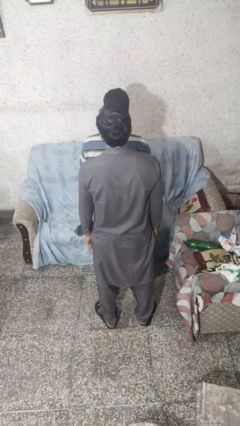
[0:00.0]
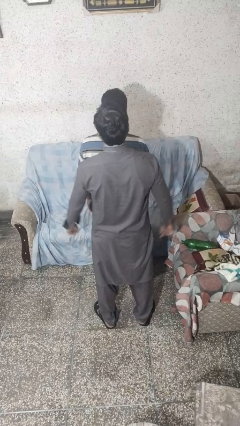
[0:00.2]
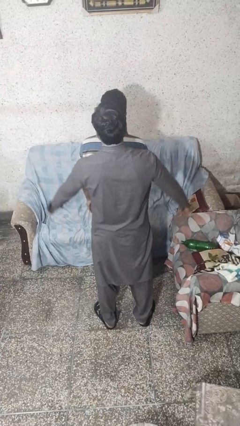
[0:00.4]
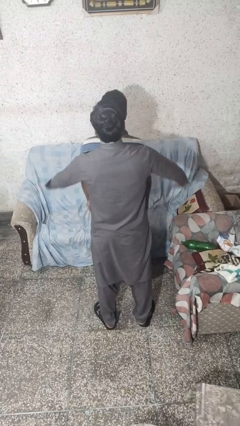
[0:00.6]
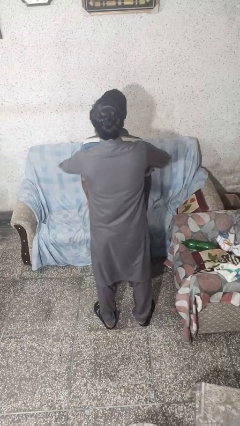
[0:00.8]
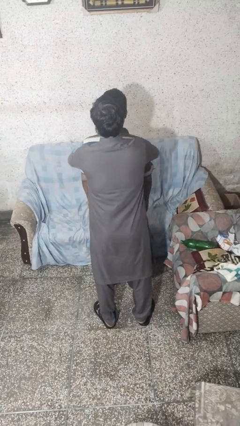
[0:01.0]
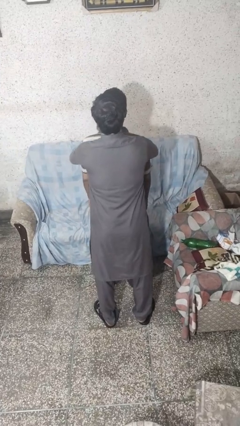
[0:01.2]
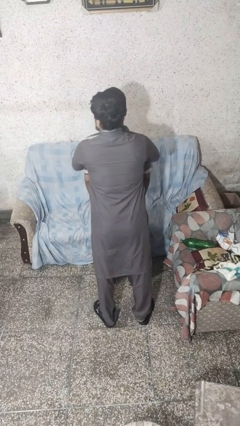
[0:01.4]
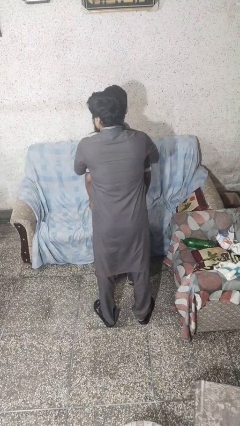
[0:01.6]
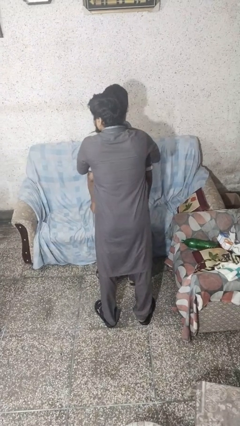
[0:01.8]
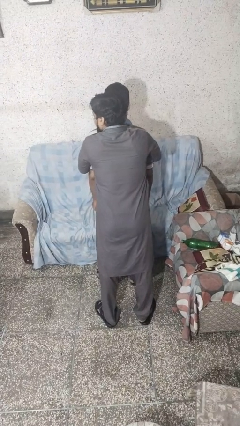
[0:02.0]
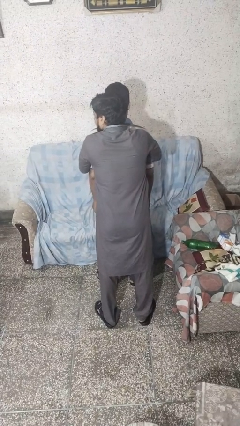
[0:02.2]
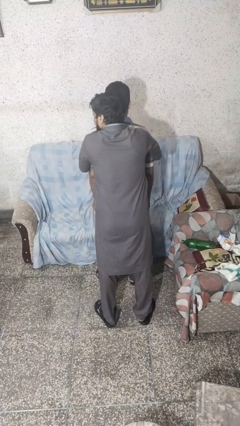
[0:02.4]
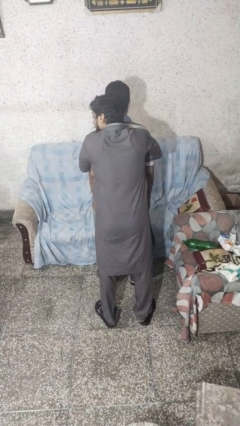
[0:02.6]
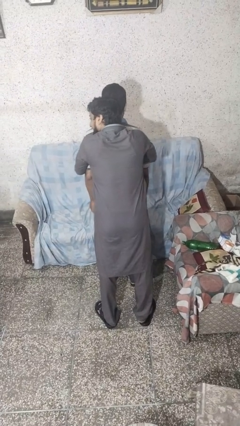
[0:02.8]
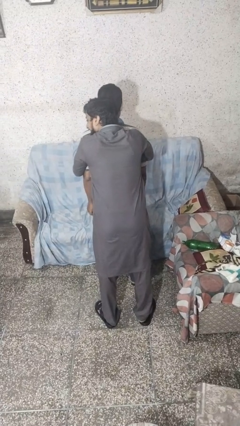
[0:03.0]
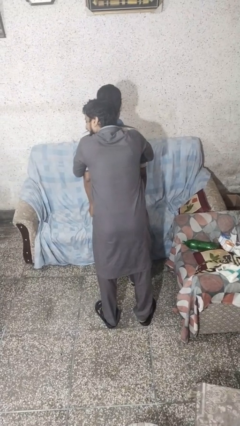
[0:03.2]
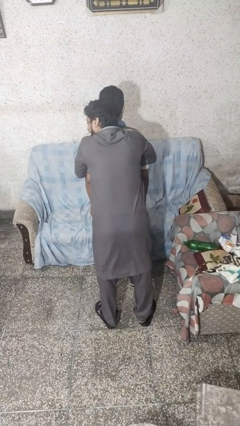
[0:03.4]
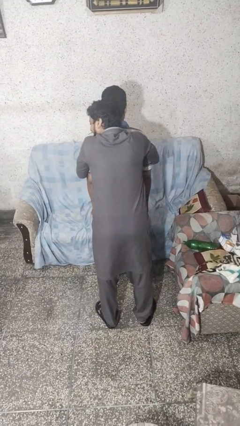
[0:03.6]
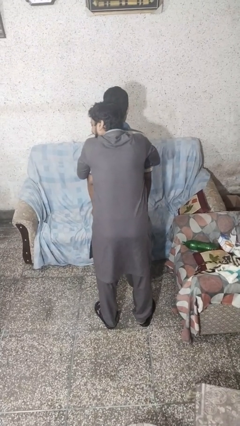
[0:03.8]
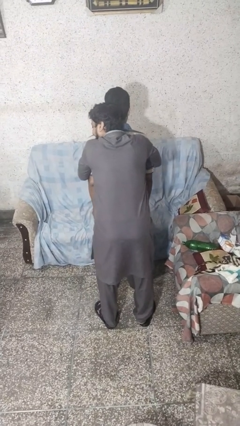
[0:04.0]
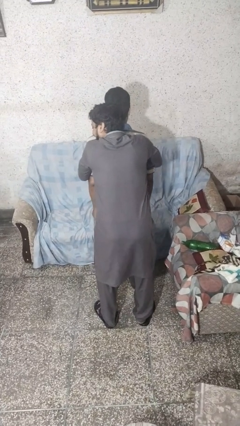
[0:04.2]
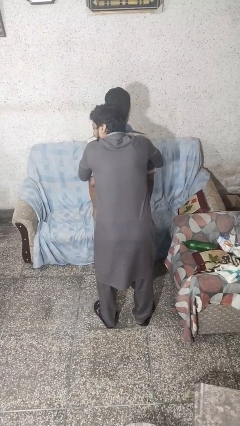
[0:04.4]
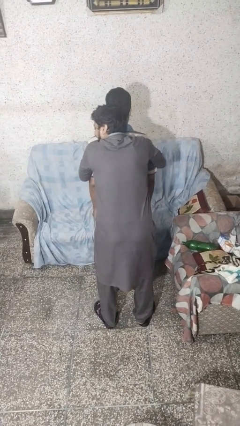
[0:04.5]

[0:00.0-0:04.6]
person hugs person from behind

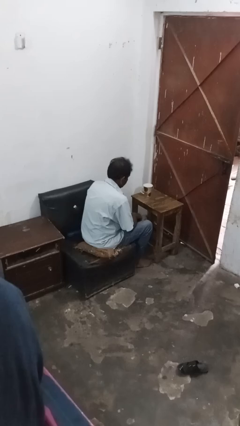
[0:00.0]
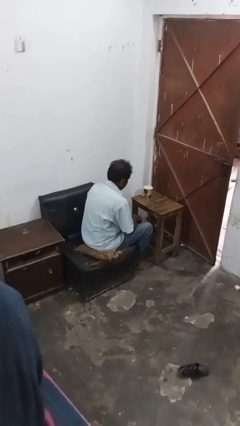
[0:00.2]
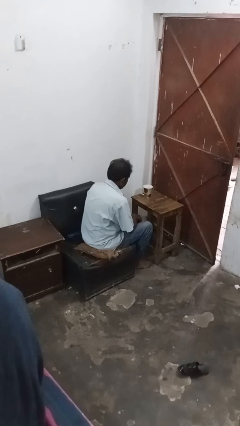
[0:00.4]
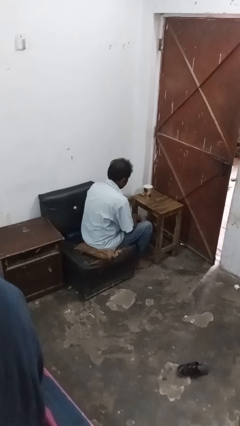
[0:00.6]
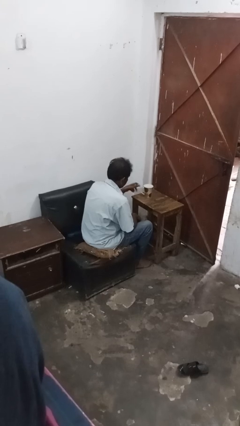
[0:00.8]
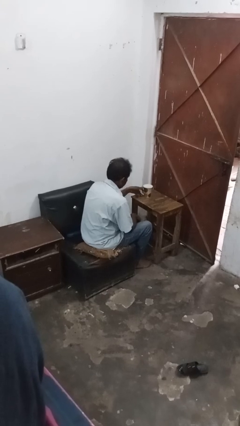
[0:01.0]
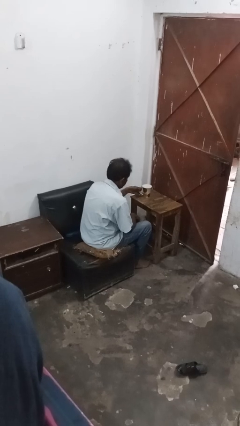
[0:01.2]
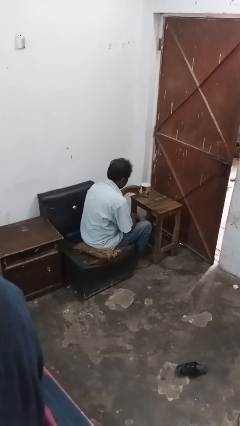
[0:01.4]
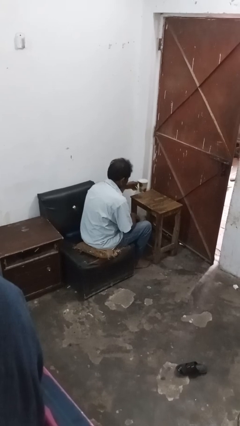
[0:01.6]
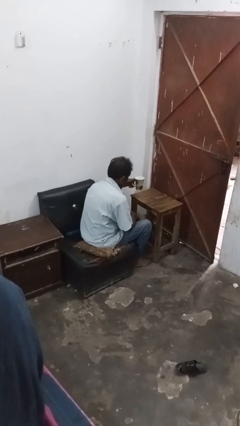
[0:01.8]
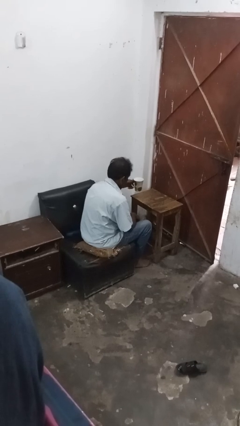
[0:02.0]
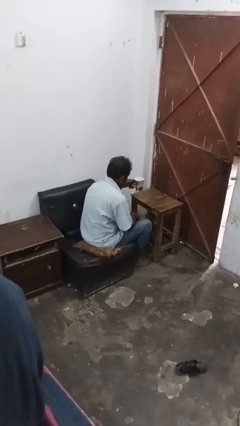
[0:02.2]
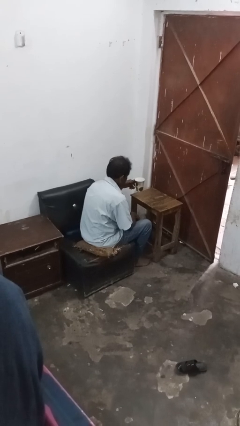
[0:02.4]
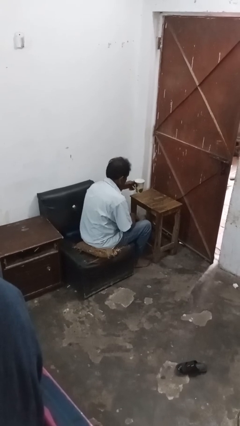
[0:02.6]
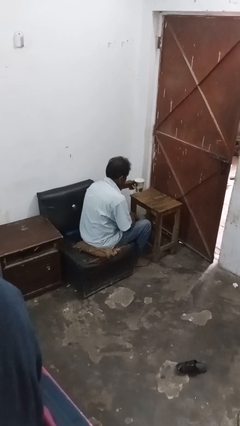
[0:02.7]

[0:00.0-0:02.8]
person picks up object from table

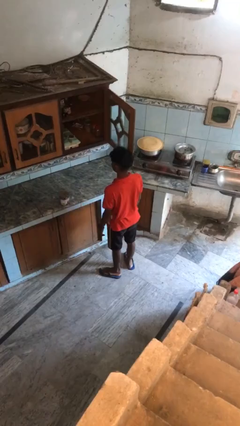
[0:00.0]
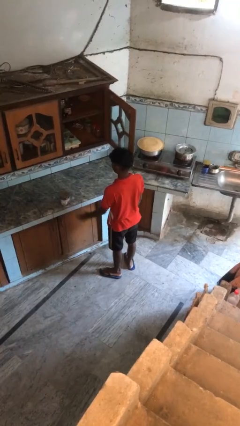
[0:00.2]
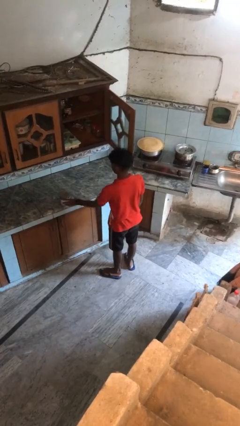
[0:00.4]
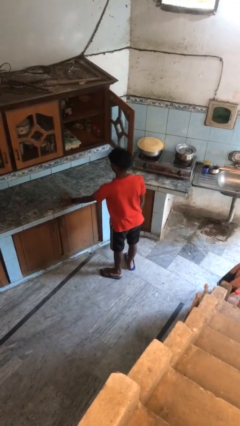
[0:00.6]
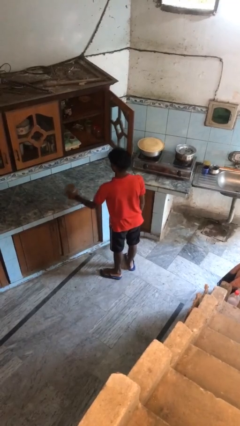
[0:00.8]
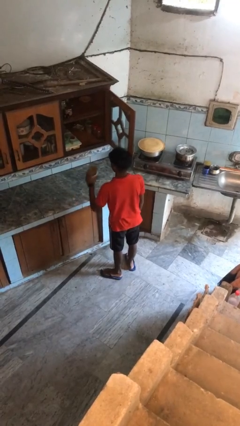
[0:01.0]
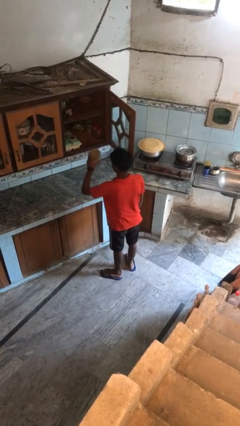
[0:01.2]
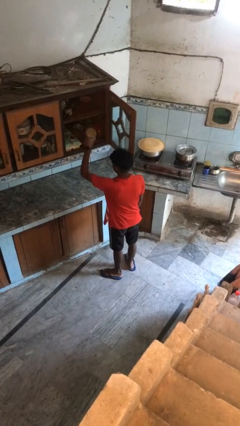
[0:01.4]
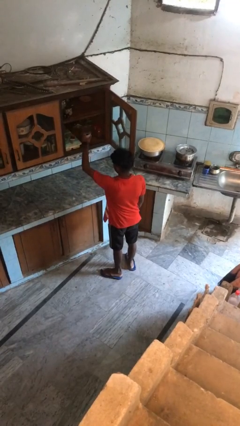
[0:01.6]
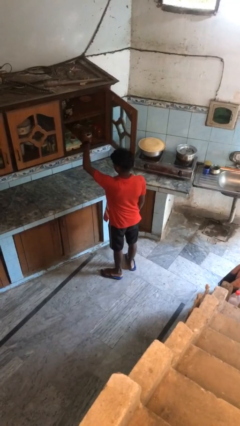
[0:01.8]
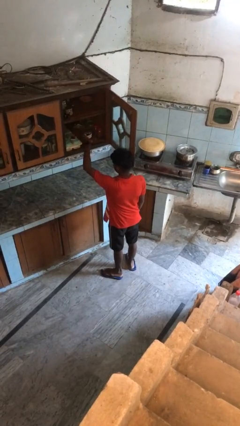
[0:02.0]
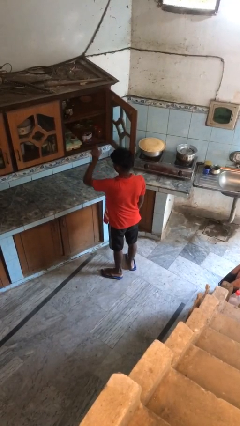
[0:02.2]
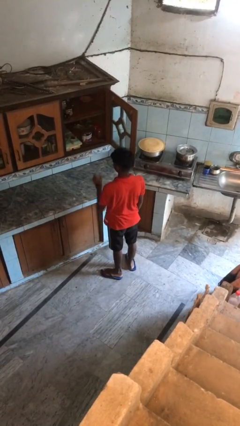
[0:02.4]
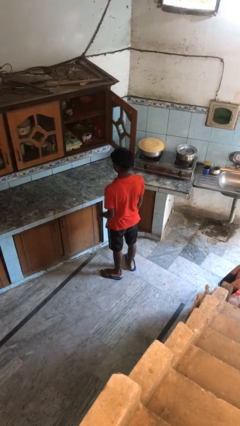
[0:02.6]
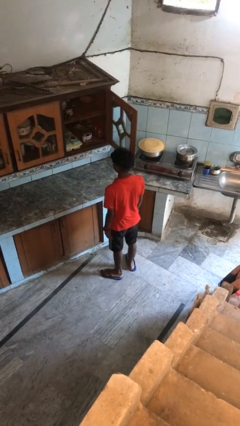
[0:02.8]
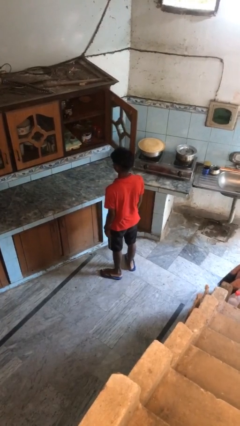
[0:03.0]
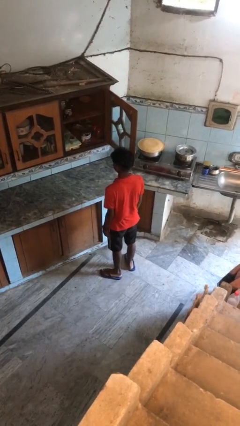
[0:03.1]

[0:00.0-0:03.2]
person puts object in cabinet

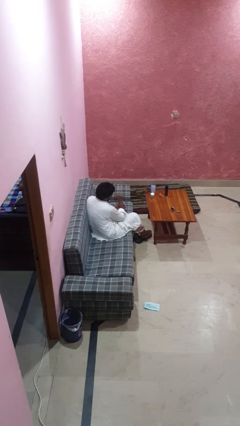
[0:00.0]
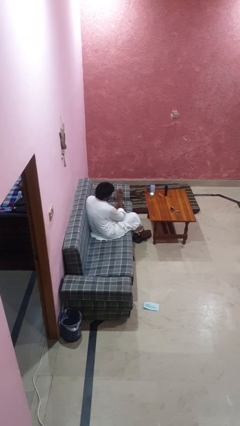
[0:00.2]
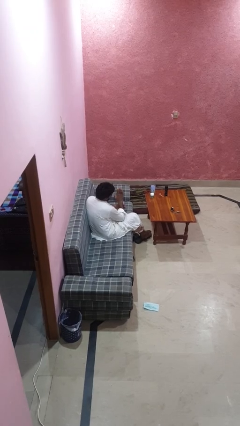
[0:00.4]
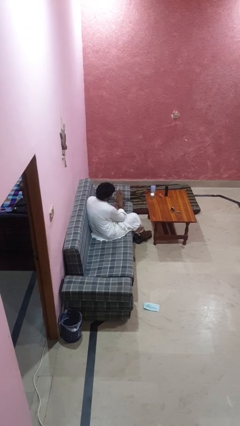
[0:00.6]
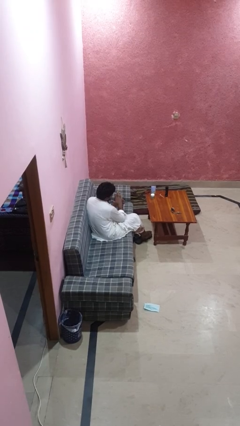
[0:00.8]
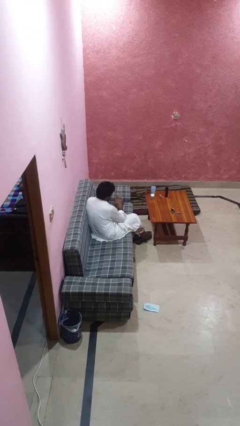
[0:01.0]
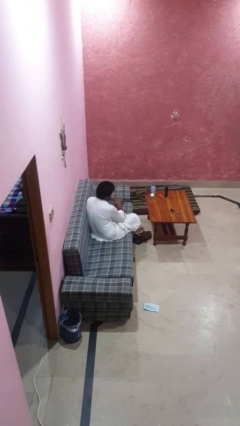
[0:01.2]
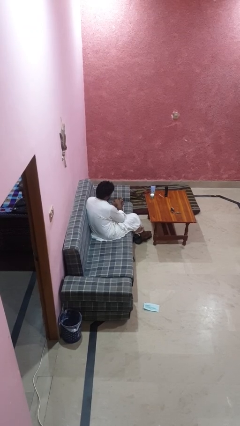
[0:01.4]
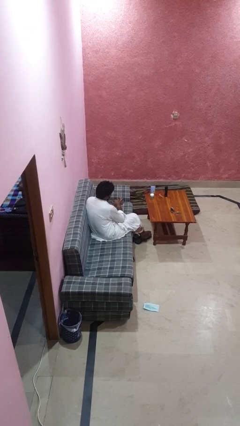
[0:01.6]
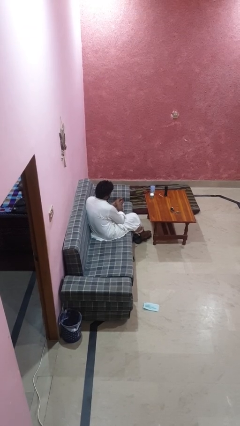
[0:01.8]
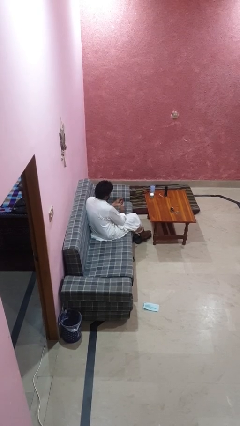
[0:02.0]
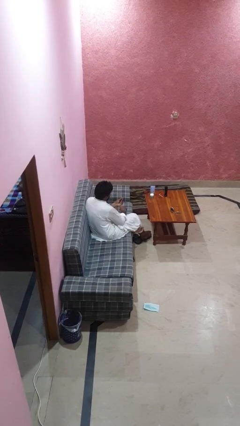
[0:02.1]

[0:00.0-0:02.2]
person takes off ring

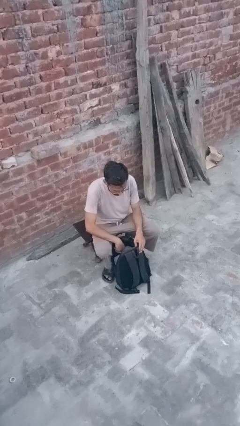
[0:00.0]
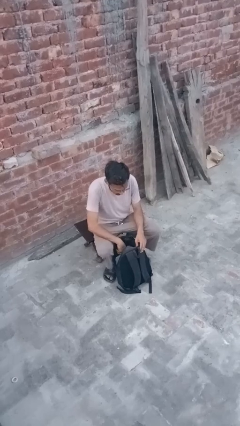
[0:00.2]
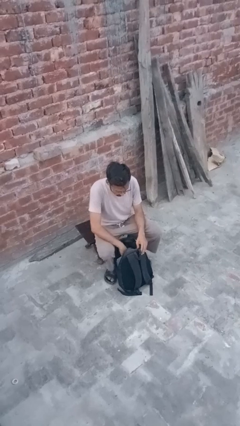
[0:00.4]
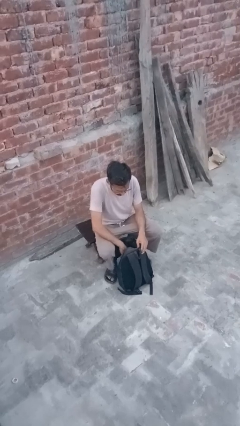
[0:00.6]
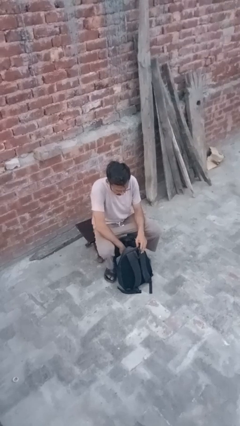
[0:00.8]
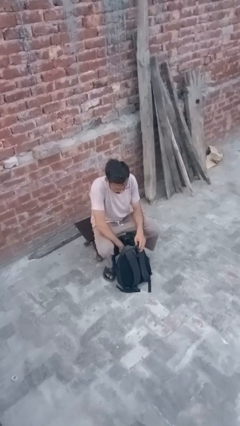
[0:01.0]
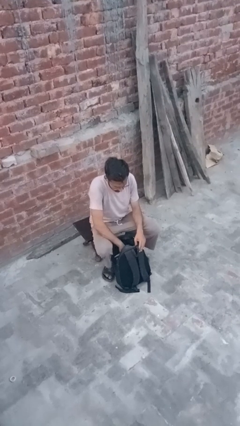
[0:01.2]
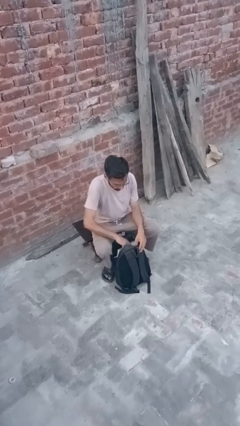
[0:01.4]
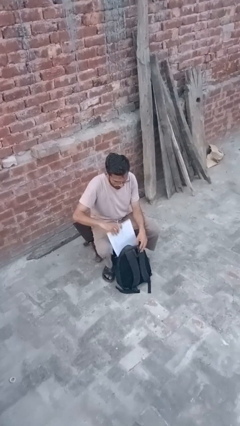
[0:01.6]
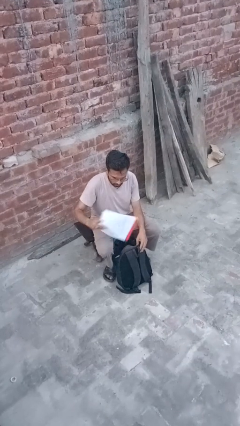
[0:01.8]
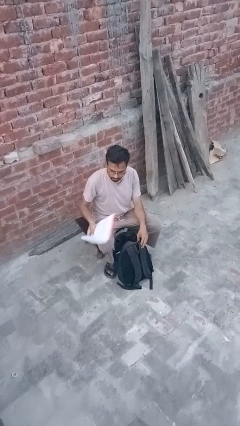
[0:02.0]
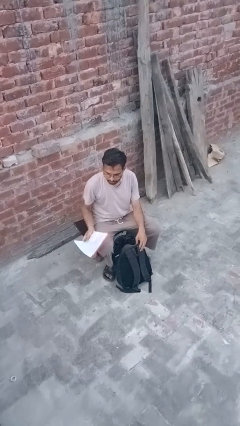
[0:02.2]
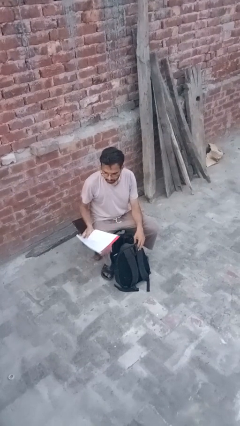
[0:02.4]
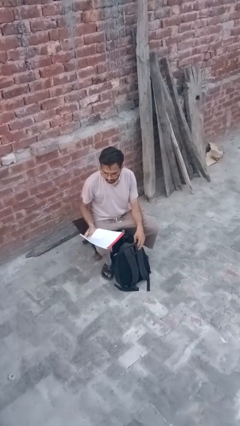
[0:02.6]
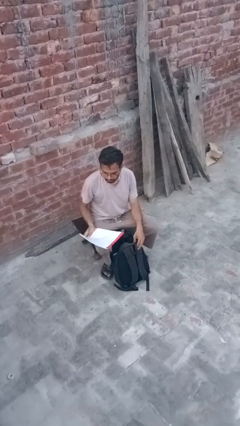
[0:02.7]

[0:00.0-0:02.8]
person takes object from backpack

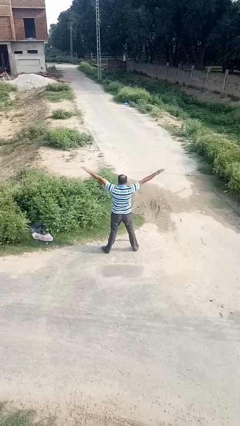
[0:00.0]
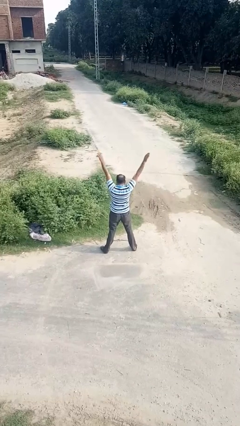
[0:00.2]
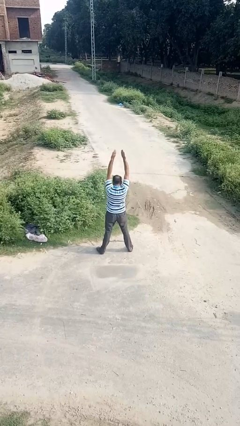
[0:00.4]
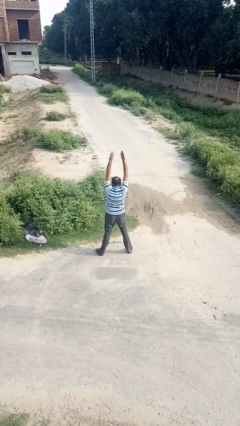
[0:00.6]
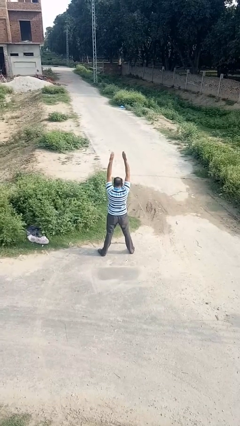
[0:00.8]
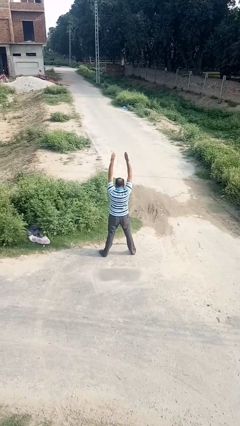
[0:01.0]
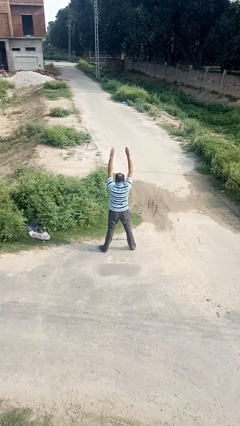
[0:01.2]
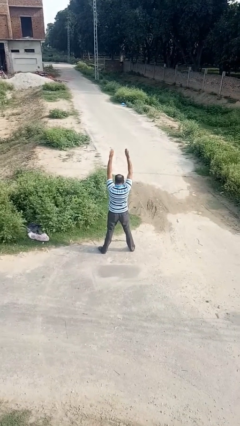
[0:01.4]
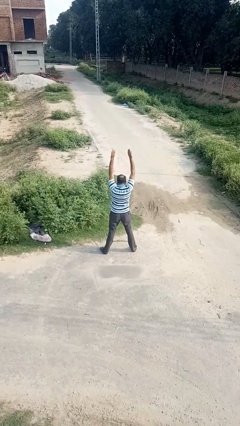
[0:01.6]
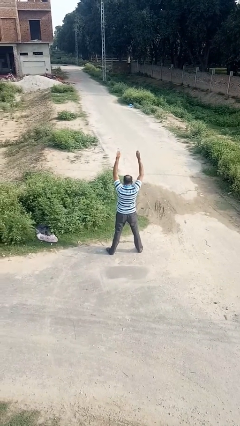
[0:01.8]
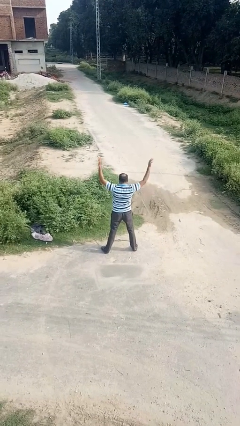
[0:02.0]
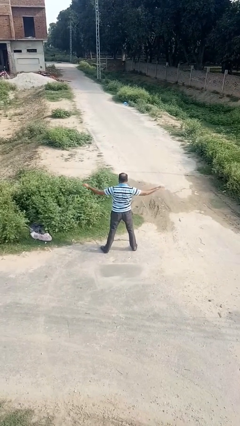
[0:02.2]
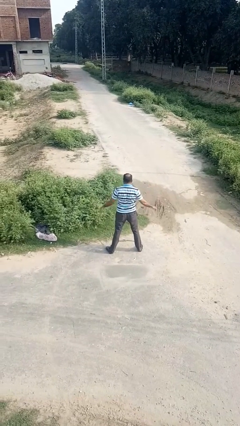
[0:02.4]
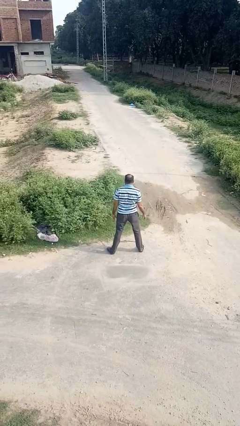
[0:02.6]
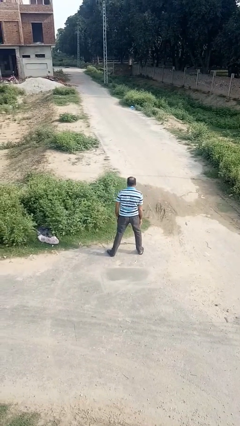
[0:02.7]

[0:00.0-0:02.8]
person stretches arms over head
